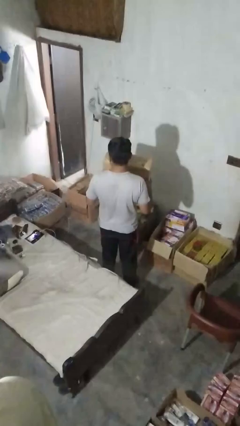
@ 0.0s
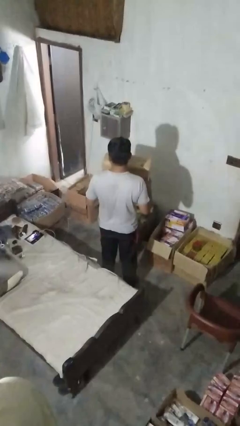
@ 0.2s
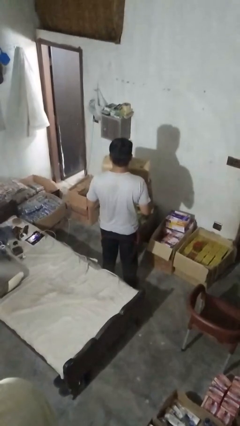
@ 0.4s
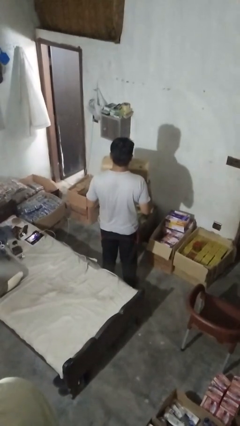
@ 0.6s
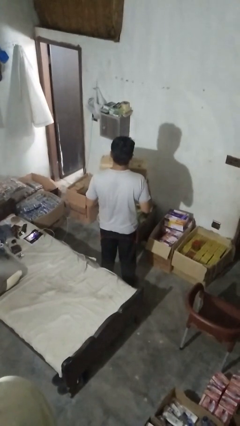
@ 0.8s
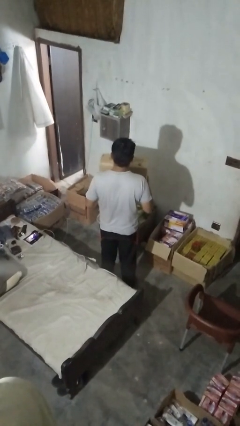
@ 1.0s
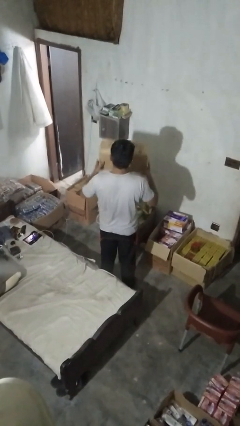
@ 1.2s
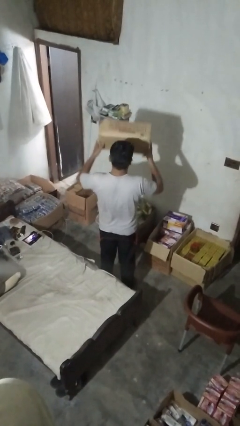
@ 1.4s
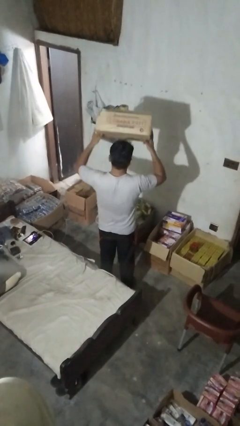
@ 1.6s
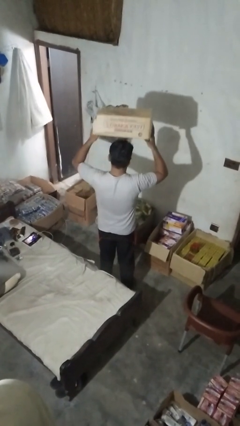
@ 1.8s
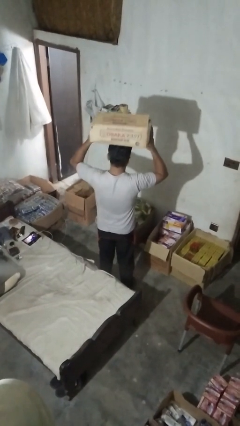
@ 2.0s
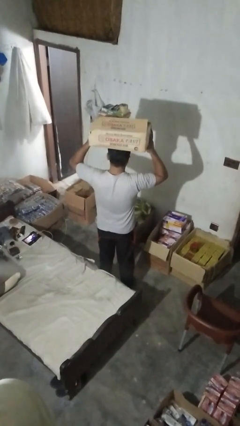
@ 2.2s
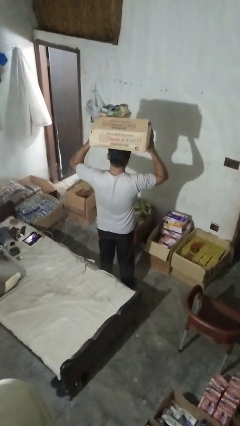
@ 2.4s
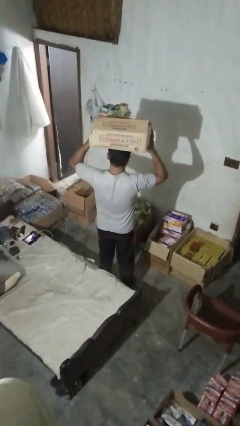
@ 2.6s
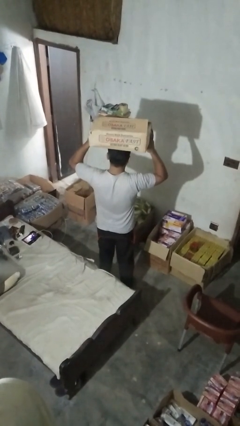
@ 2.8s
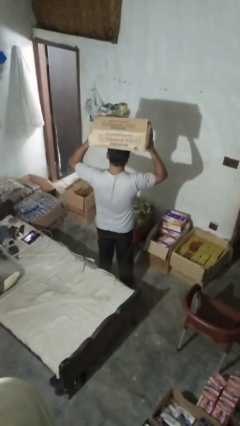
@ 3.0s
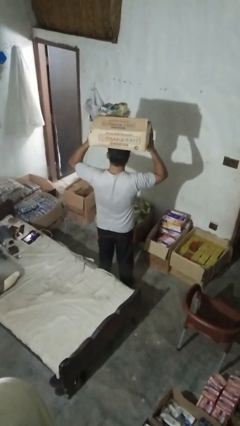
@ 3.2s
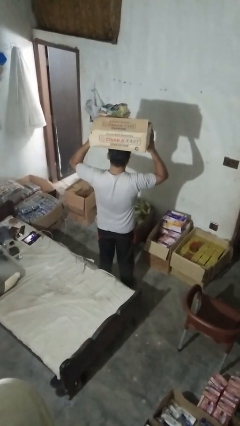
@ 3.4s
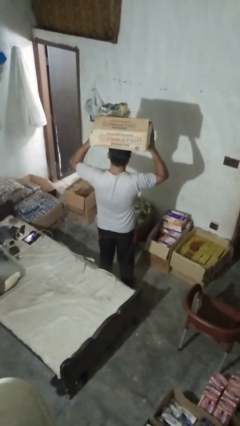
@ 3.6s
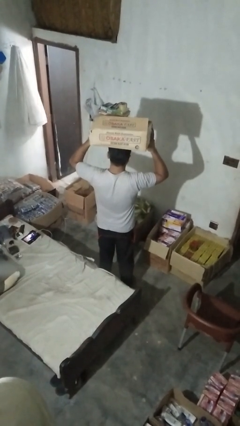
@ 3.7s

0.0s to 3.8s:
person holds object above head

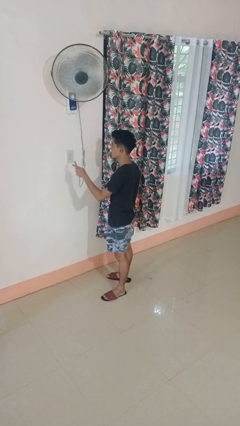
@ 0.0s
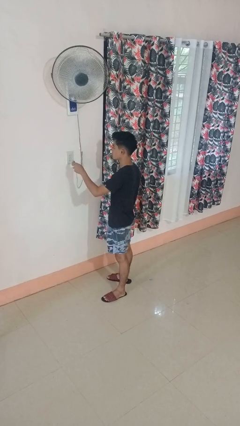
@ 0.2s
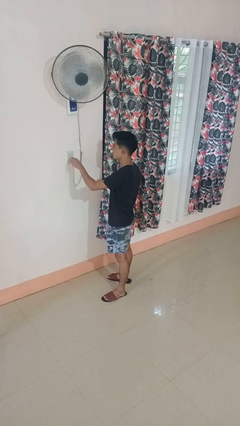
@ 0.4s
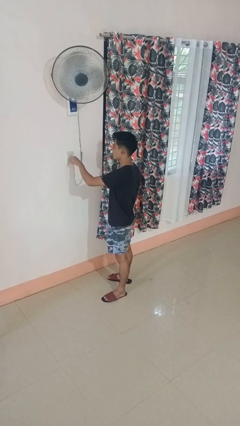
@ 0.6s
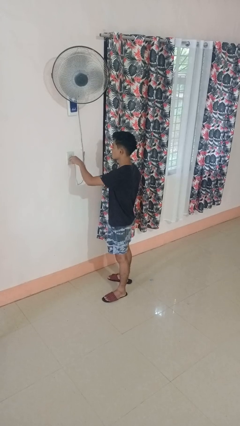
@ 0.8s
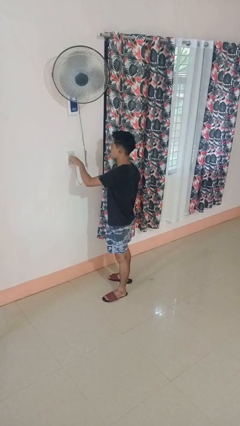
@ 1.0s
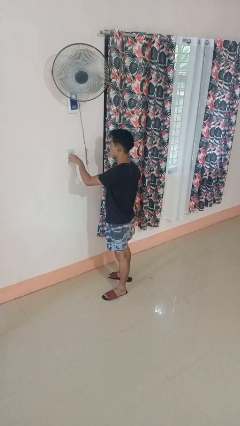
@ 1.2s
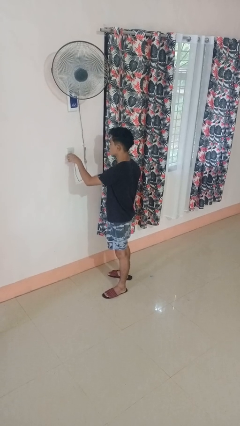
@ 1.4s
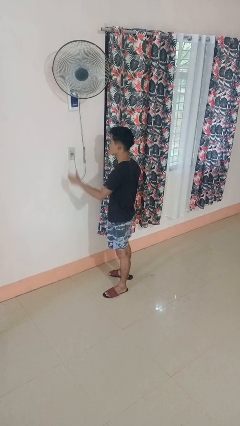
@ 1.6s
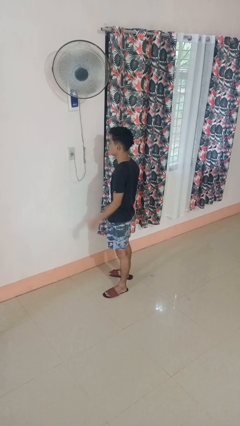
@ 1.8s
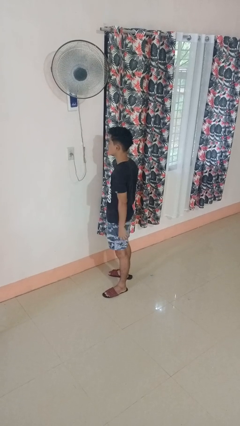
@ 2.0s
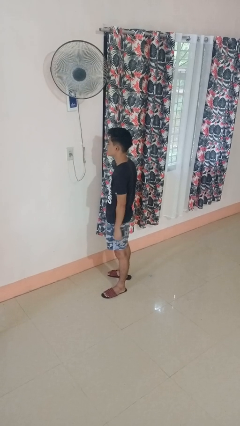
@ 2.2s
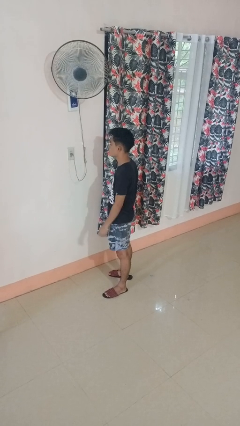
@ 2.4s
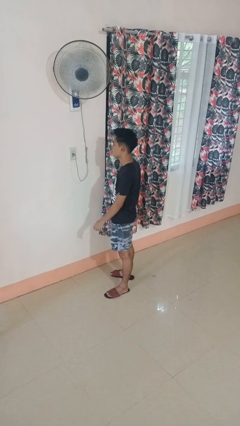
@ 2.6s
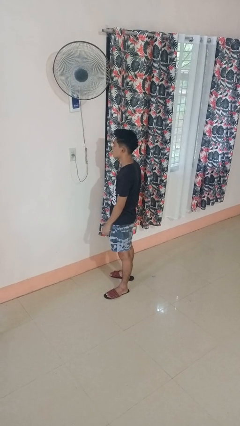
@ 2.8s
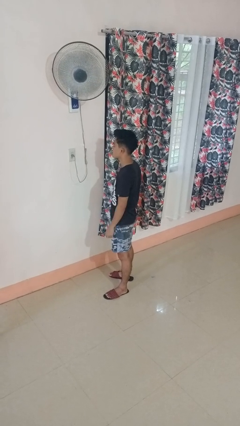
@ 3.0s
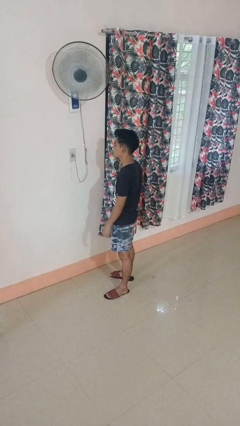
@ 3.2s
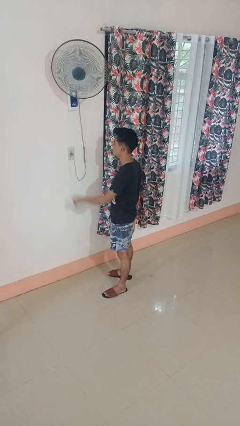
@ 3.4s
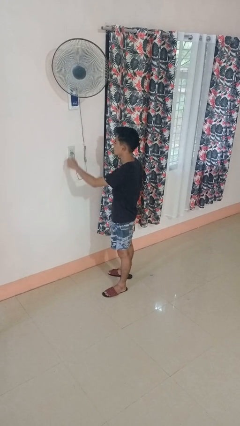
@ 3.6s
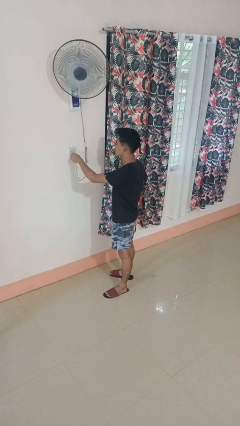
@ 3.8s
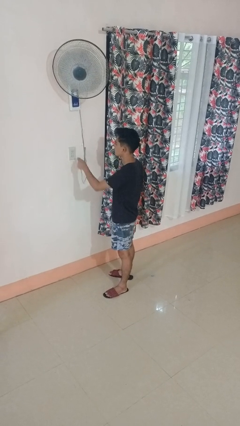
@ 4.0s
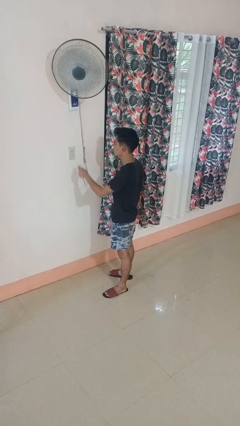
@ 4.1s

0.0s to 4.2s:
person plugs into electrical socket

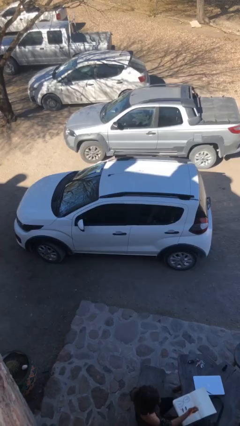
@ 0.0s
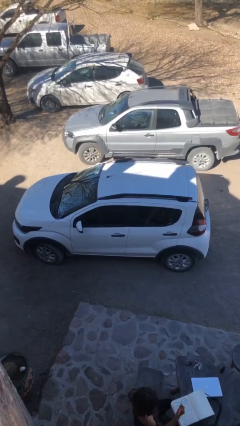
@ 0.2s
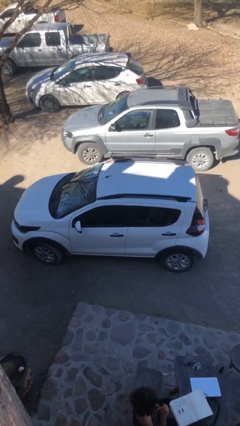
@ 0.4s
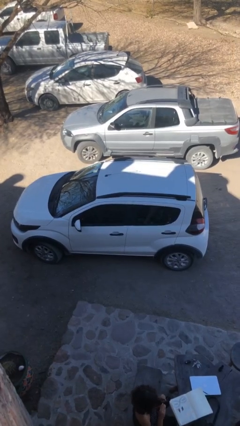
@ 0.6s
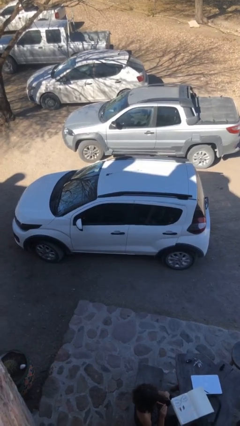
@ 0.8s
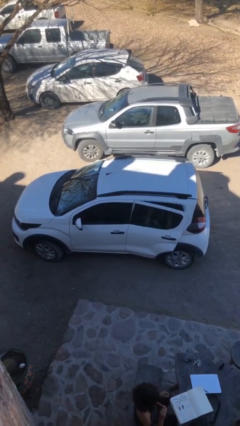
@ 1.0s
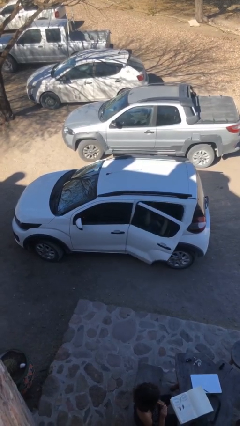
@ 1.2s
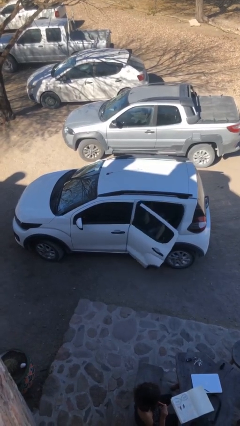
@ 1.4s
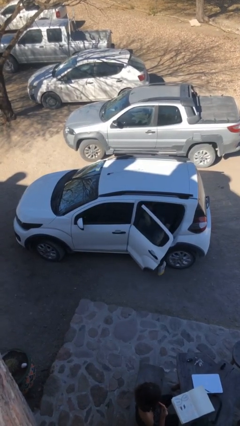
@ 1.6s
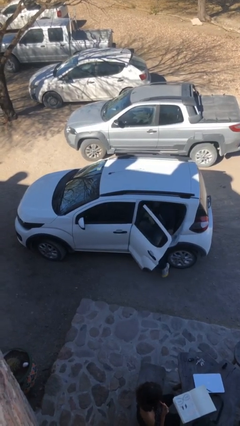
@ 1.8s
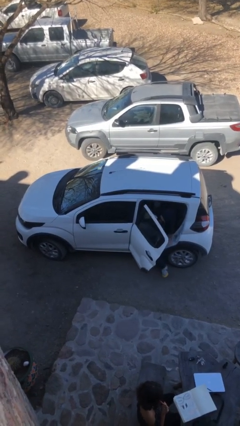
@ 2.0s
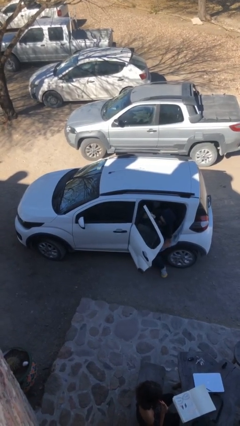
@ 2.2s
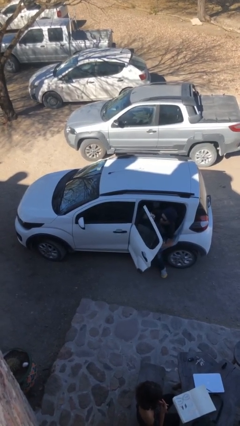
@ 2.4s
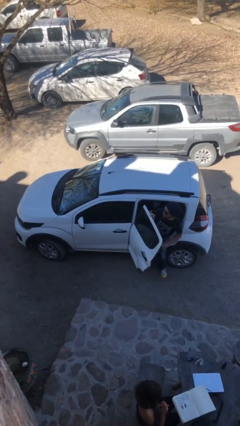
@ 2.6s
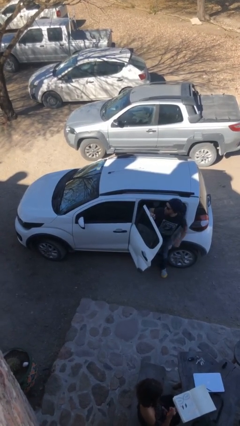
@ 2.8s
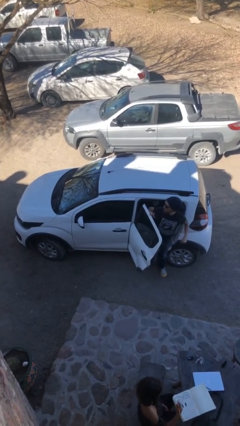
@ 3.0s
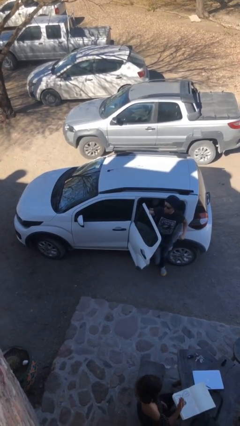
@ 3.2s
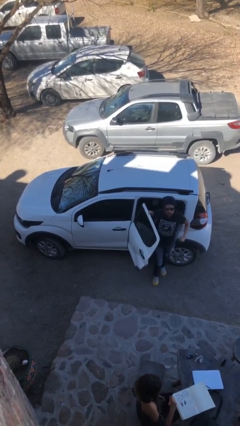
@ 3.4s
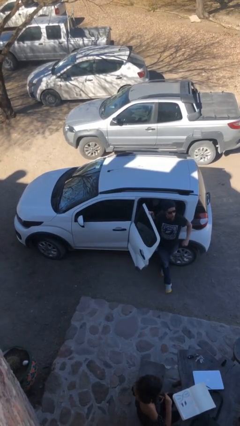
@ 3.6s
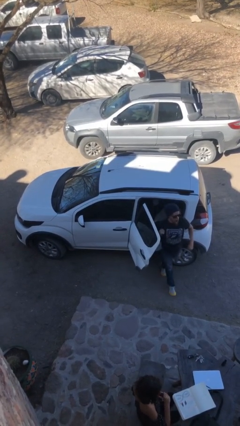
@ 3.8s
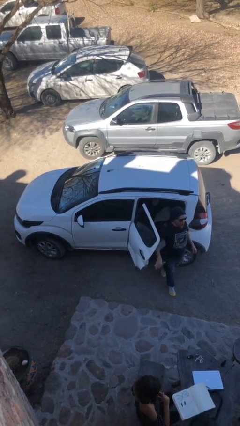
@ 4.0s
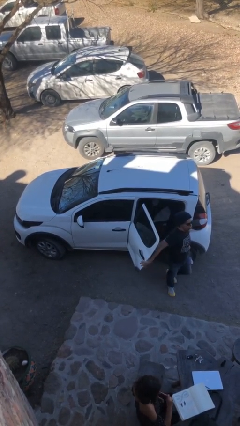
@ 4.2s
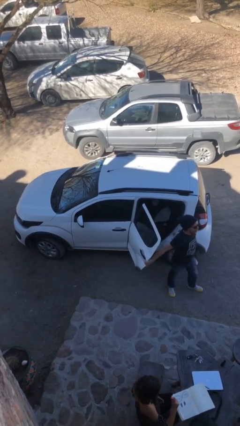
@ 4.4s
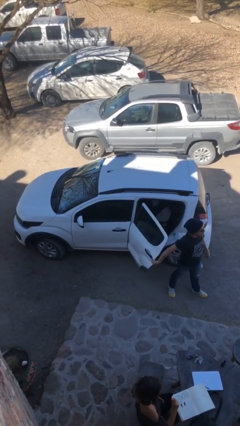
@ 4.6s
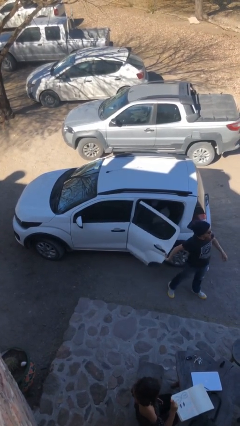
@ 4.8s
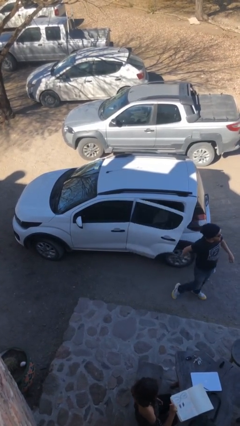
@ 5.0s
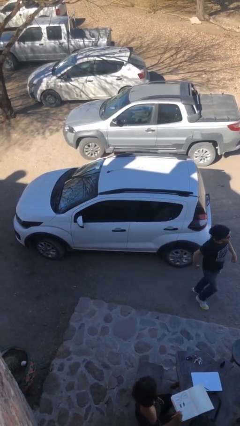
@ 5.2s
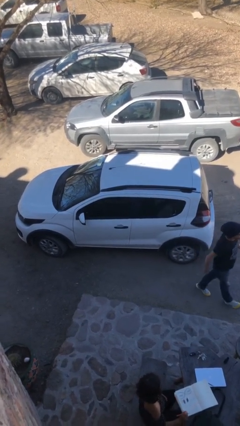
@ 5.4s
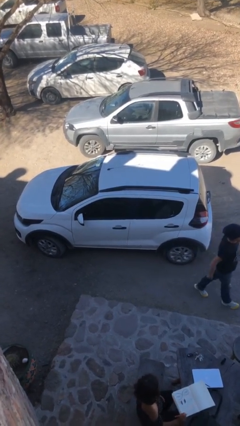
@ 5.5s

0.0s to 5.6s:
car drops off person

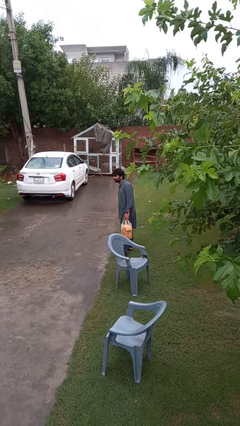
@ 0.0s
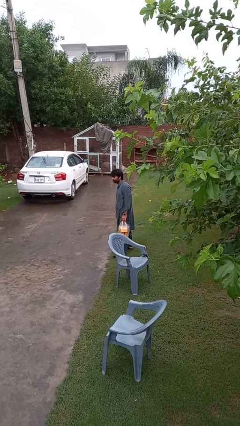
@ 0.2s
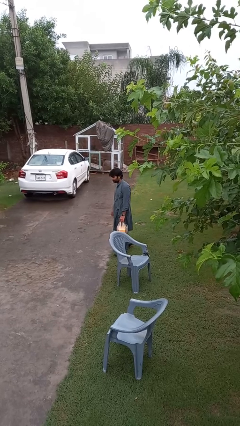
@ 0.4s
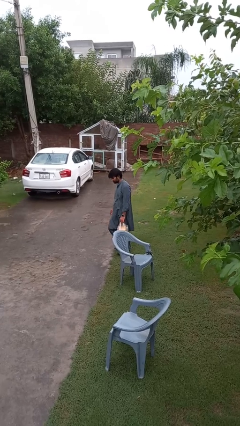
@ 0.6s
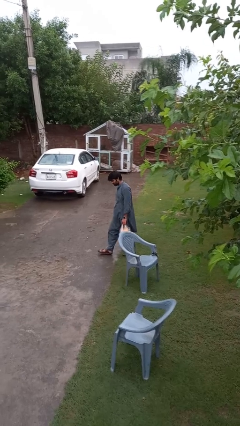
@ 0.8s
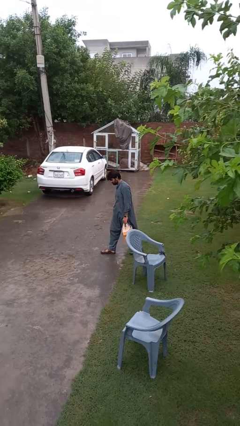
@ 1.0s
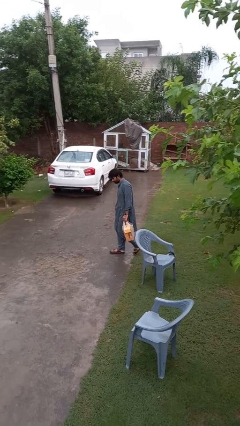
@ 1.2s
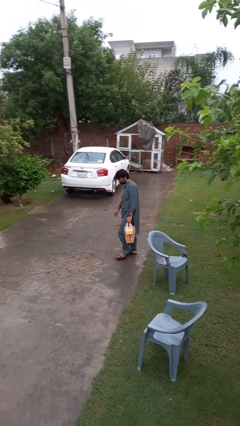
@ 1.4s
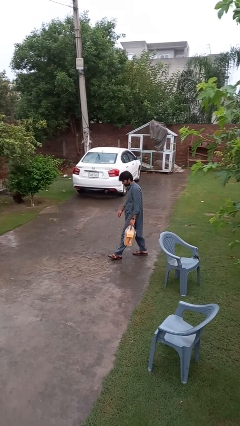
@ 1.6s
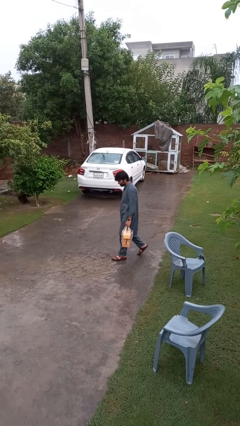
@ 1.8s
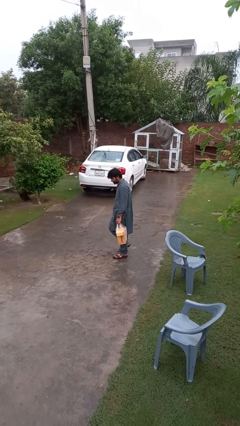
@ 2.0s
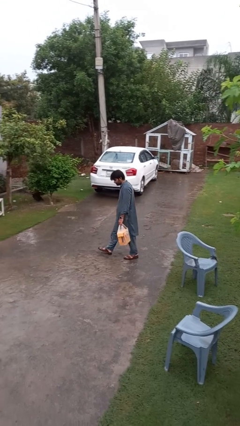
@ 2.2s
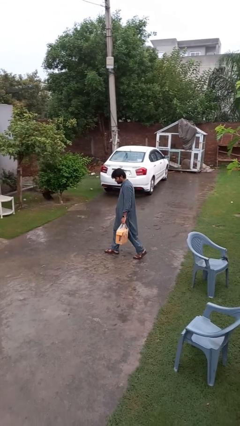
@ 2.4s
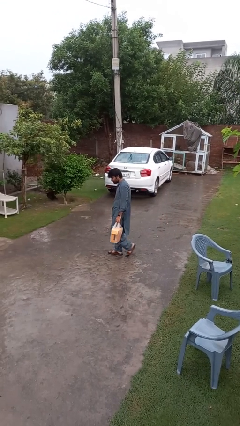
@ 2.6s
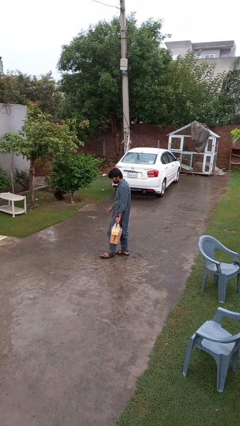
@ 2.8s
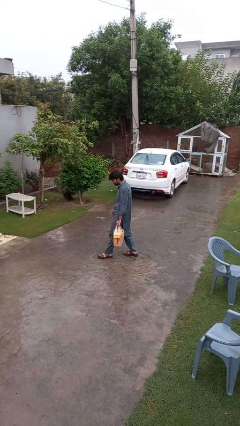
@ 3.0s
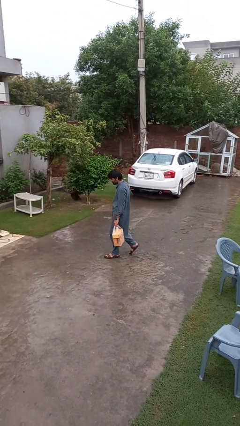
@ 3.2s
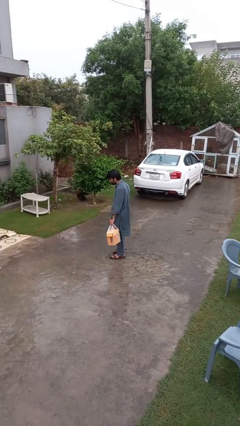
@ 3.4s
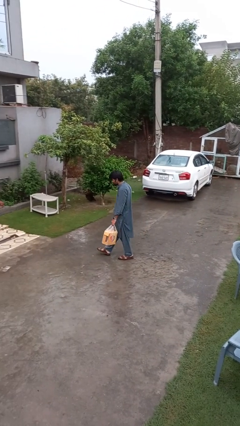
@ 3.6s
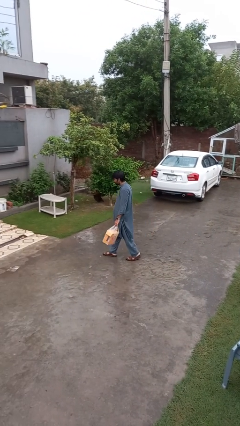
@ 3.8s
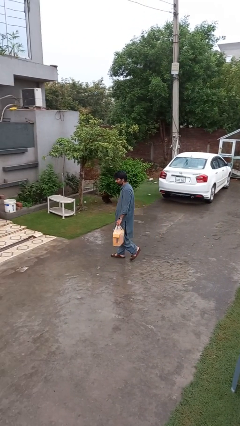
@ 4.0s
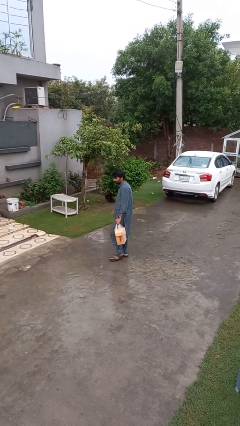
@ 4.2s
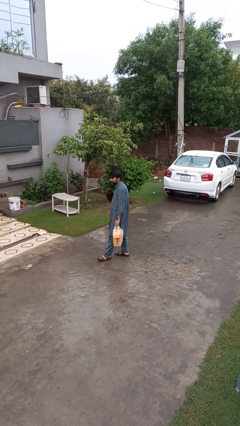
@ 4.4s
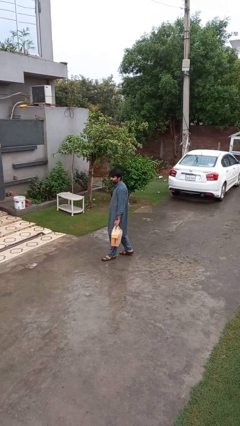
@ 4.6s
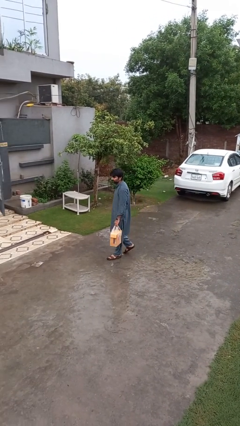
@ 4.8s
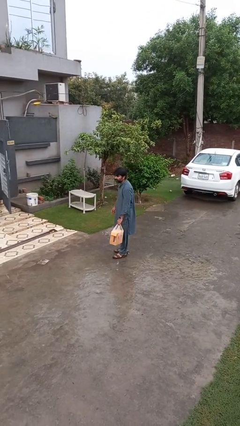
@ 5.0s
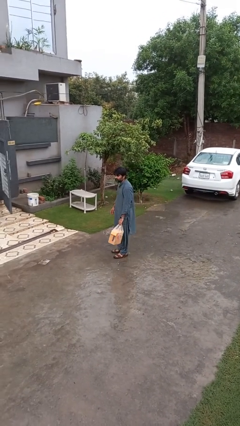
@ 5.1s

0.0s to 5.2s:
person carries groceries
